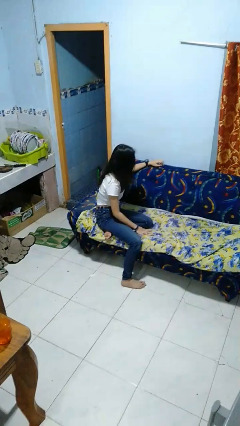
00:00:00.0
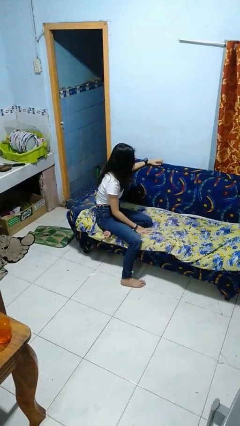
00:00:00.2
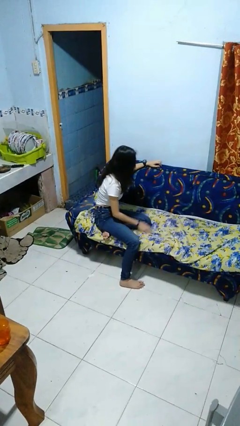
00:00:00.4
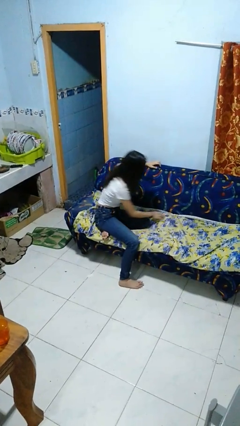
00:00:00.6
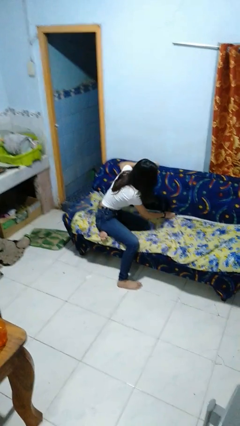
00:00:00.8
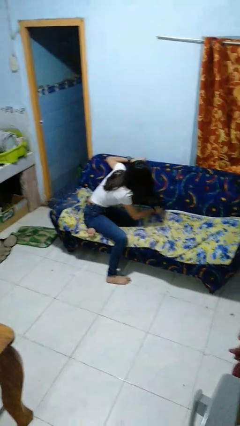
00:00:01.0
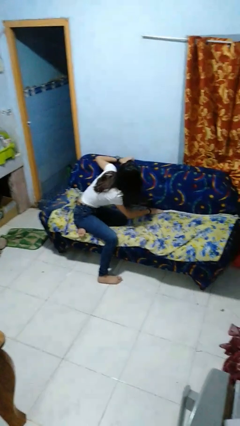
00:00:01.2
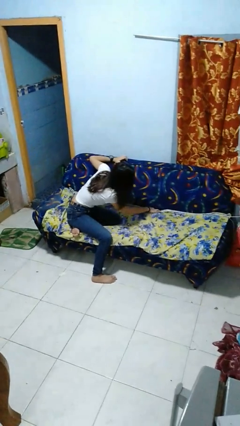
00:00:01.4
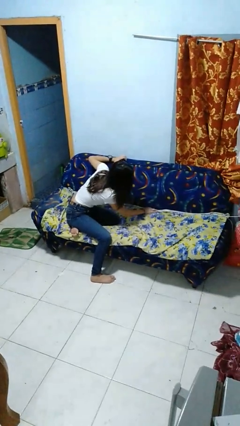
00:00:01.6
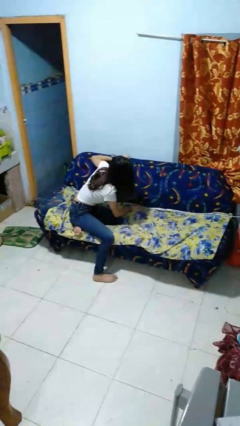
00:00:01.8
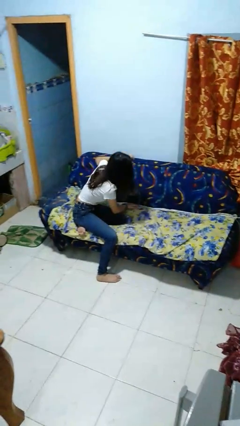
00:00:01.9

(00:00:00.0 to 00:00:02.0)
person searches in couch

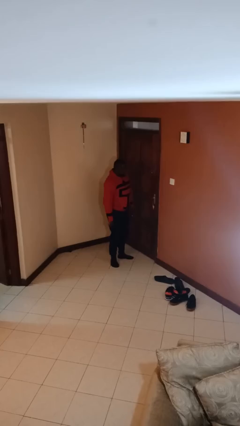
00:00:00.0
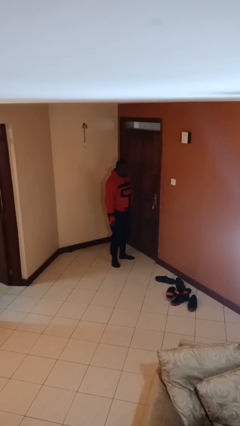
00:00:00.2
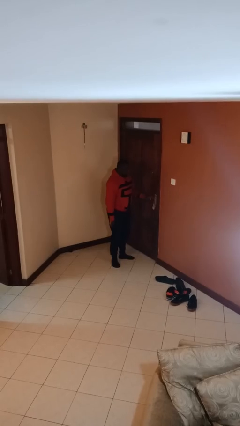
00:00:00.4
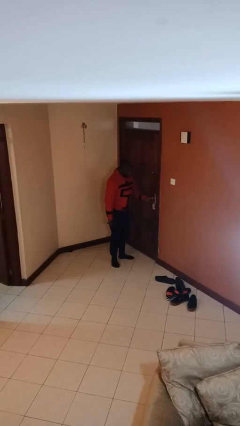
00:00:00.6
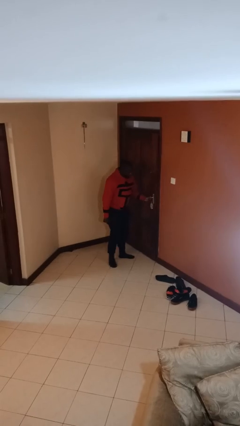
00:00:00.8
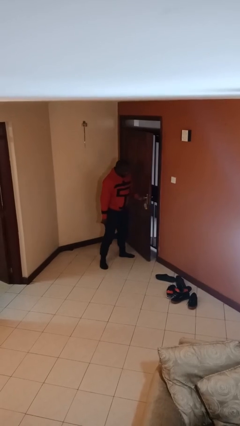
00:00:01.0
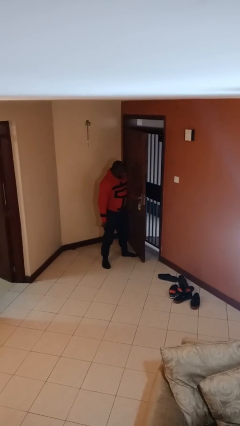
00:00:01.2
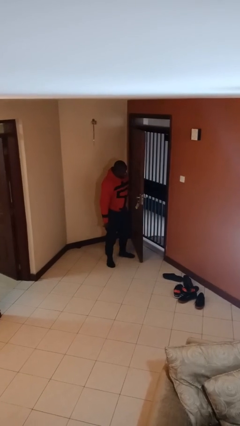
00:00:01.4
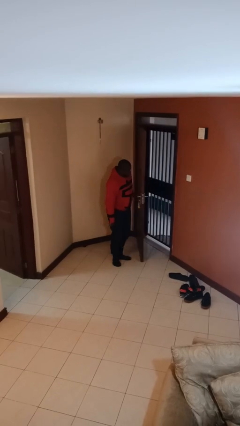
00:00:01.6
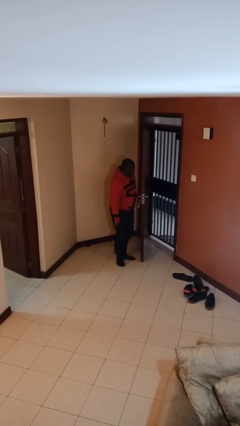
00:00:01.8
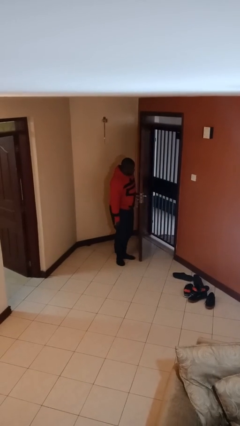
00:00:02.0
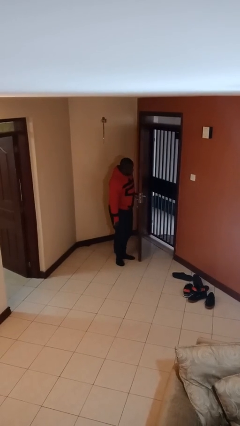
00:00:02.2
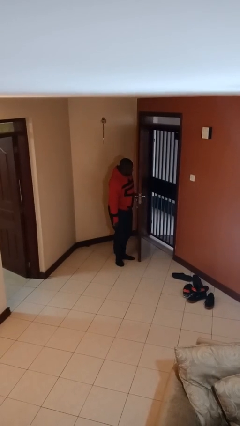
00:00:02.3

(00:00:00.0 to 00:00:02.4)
person opens facility door

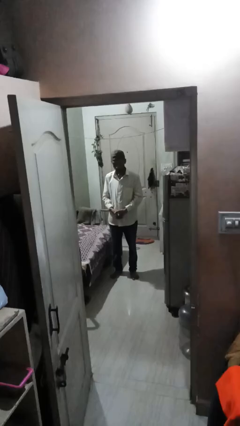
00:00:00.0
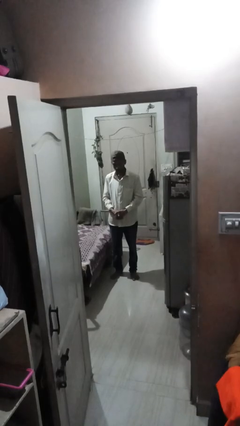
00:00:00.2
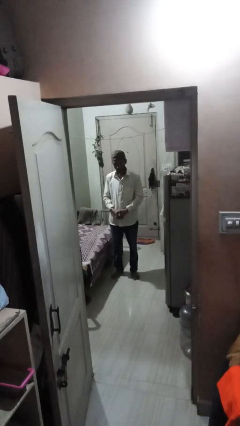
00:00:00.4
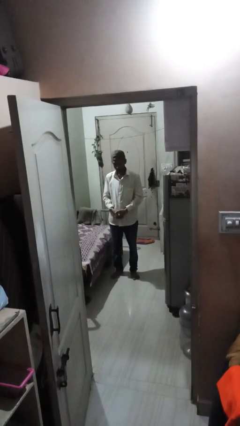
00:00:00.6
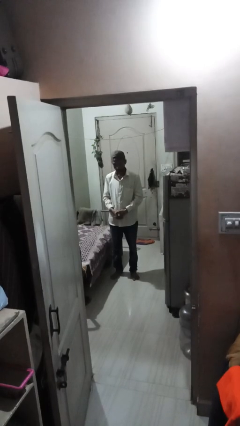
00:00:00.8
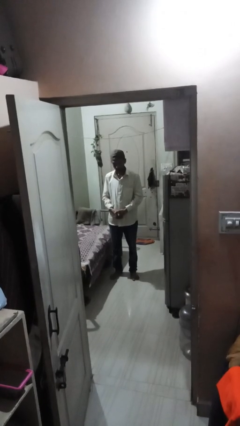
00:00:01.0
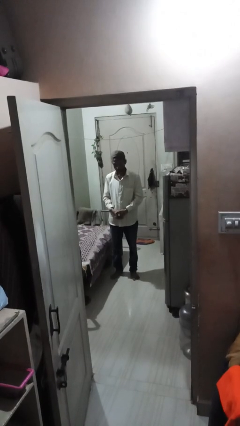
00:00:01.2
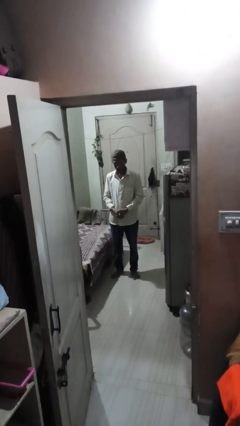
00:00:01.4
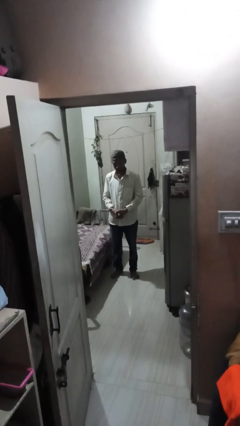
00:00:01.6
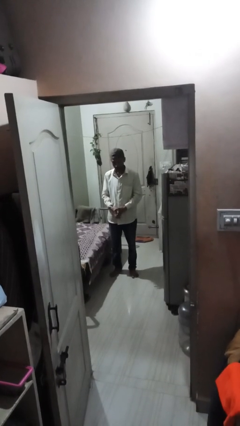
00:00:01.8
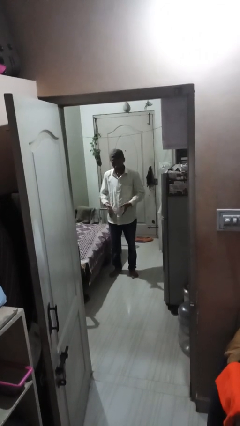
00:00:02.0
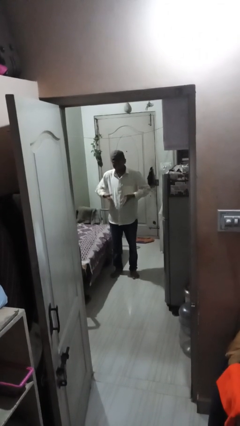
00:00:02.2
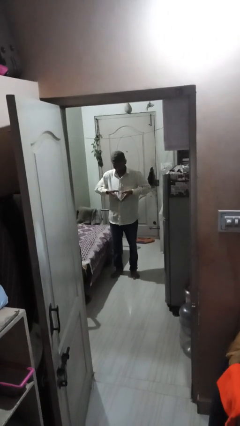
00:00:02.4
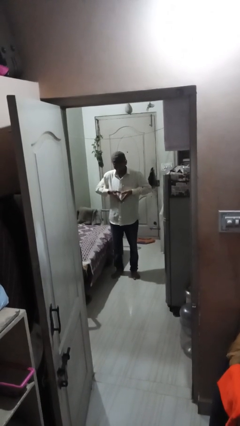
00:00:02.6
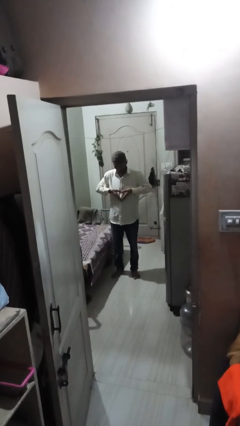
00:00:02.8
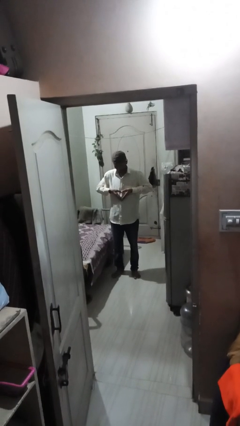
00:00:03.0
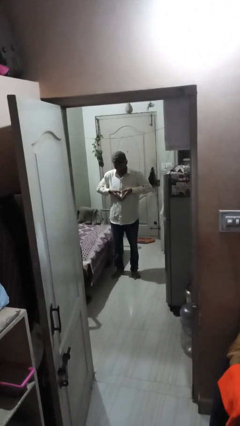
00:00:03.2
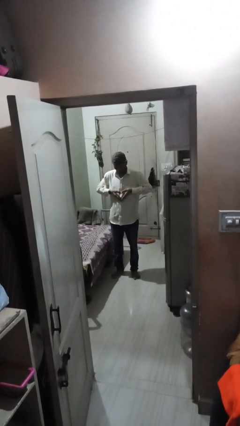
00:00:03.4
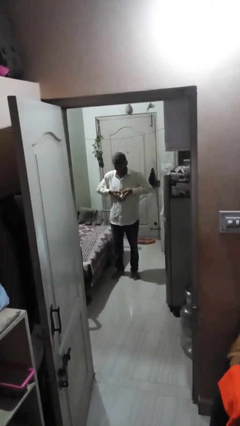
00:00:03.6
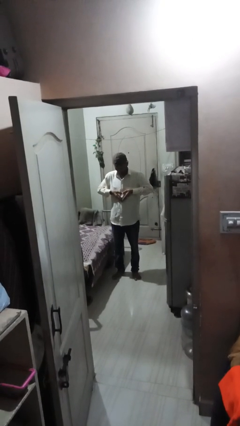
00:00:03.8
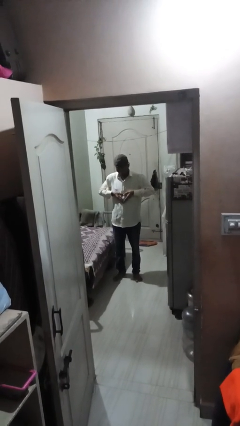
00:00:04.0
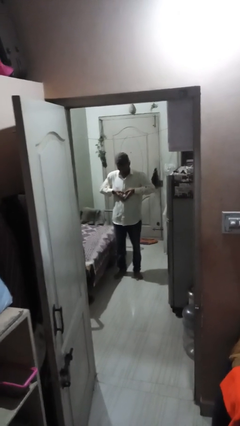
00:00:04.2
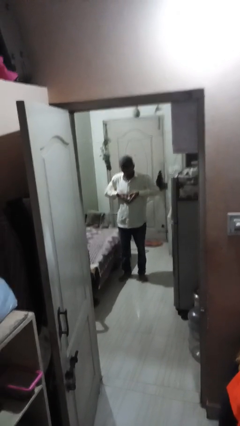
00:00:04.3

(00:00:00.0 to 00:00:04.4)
person gestures heart

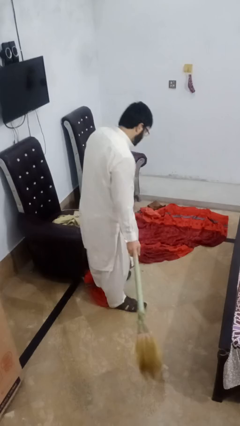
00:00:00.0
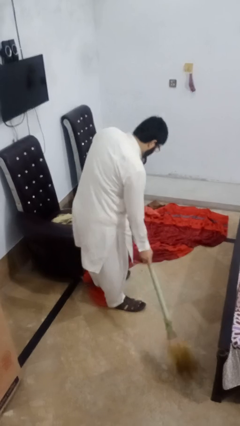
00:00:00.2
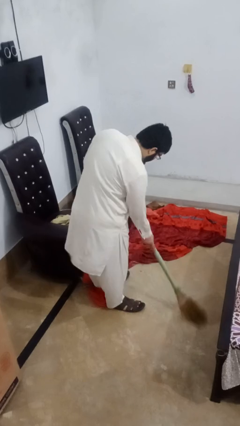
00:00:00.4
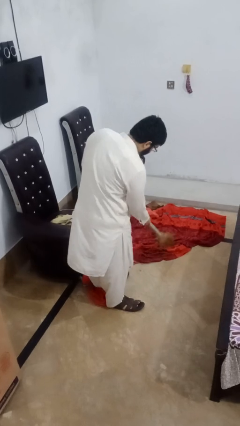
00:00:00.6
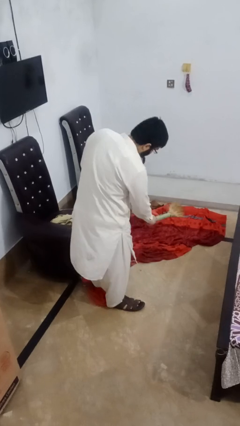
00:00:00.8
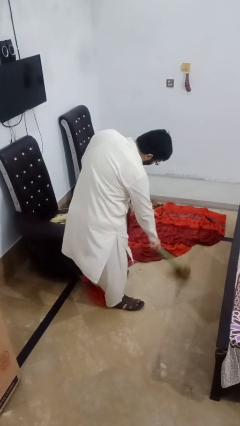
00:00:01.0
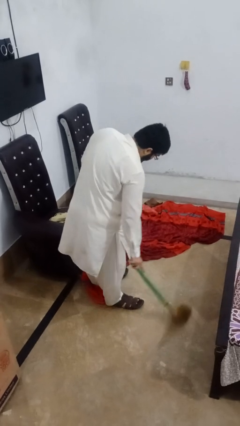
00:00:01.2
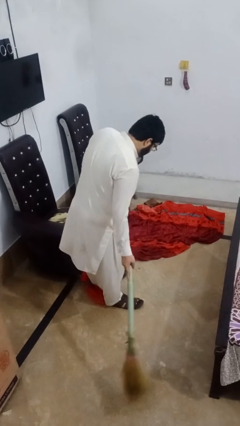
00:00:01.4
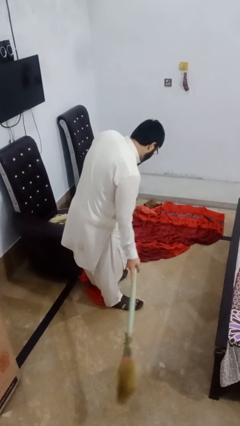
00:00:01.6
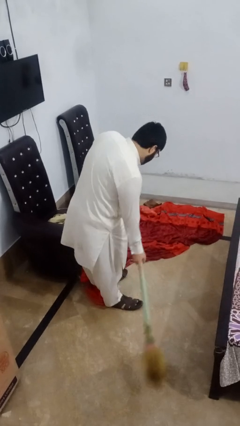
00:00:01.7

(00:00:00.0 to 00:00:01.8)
person sweeps floor

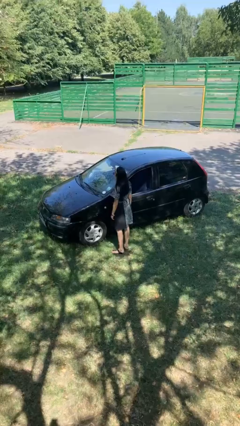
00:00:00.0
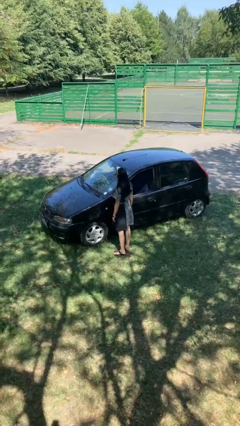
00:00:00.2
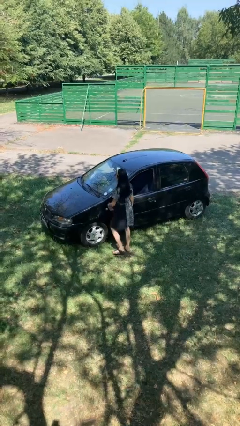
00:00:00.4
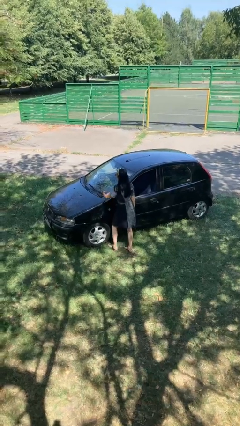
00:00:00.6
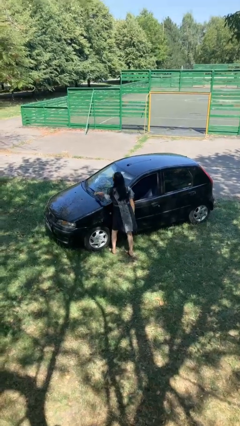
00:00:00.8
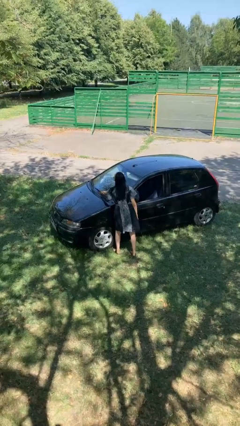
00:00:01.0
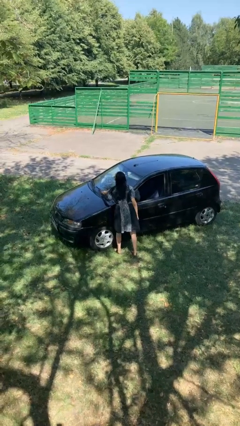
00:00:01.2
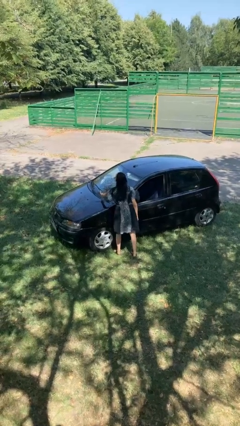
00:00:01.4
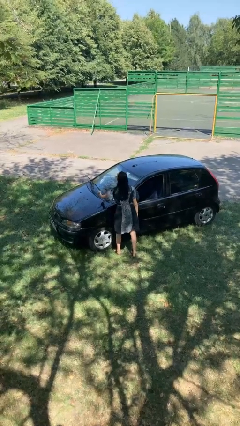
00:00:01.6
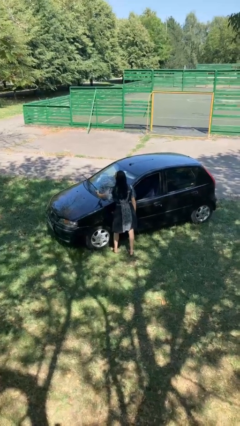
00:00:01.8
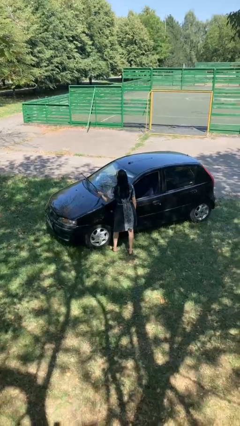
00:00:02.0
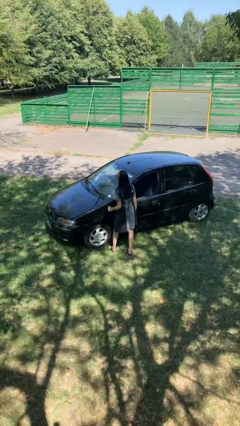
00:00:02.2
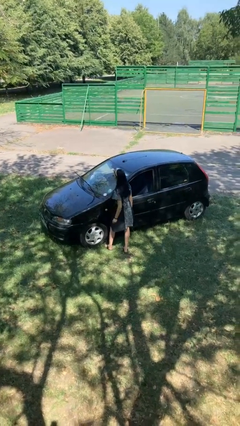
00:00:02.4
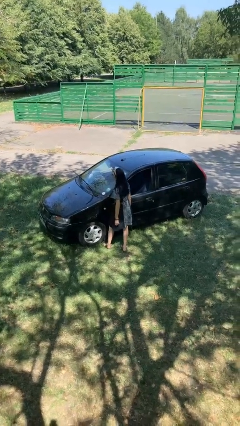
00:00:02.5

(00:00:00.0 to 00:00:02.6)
person flips up car wipers

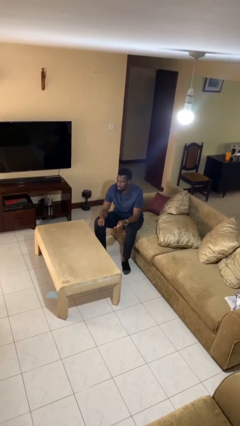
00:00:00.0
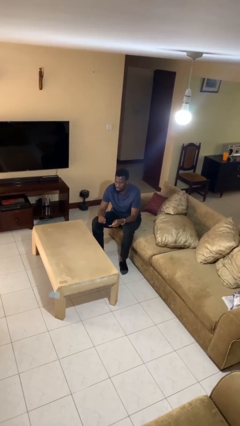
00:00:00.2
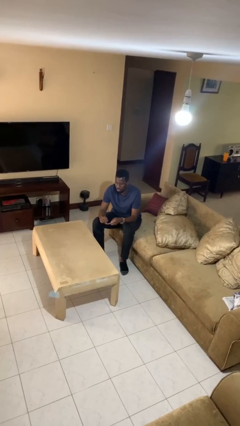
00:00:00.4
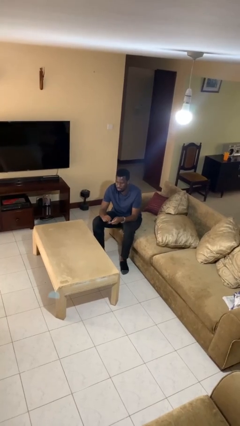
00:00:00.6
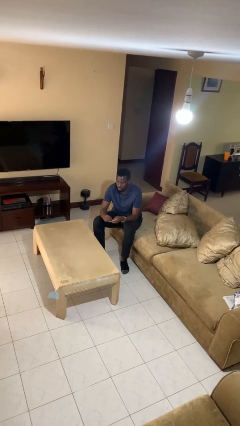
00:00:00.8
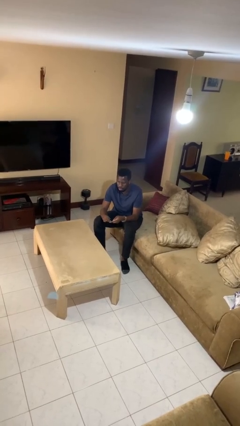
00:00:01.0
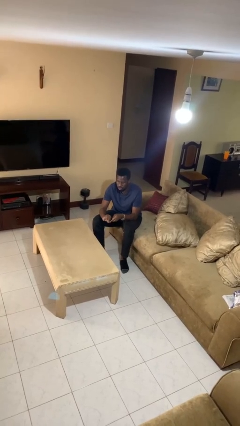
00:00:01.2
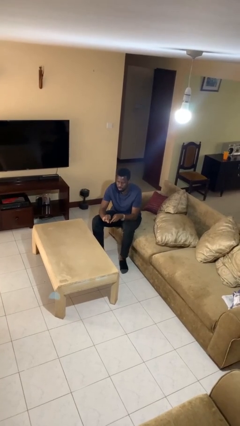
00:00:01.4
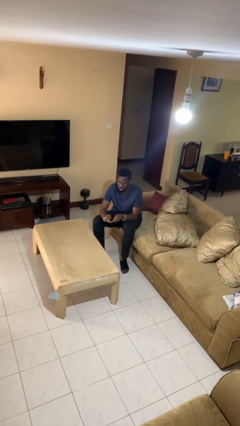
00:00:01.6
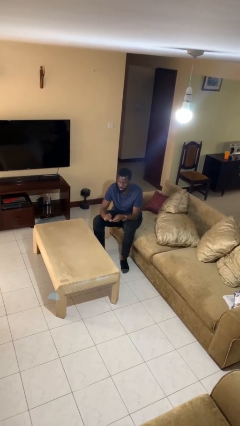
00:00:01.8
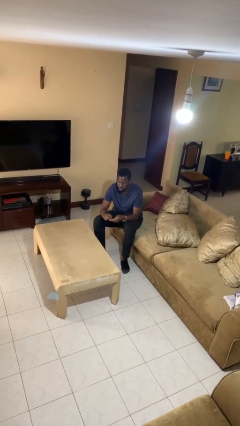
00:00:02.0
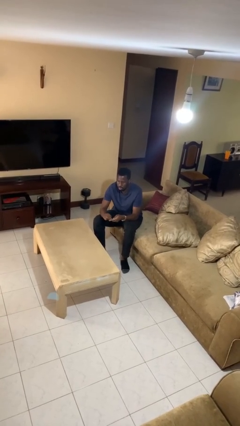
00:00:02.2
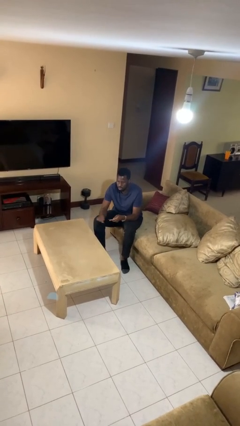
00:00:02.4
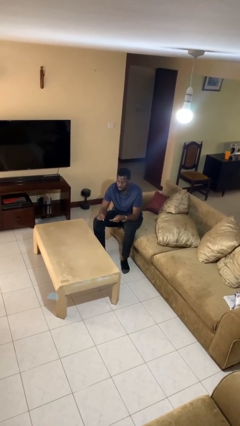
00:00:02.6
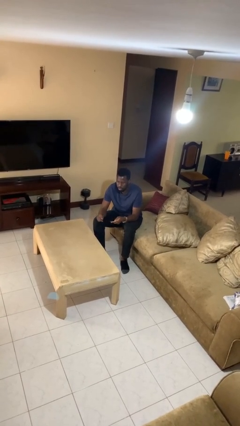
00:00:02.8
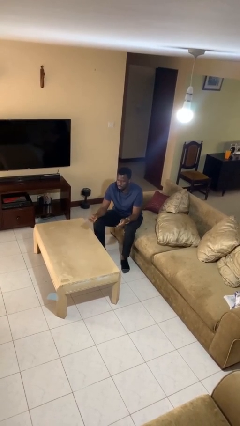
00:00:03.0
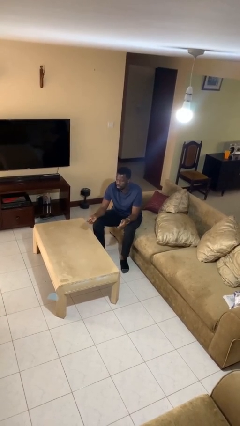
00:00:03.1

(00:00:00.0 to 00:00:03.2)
person files fingernails

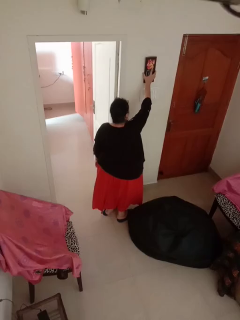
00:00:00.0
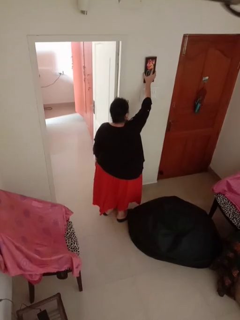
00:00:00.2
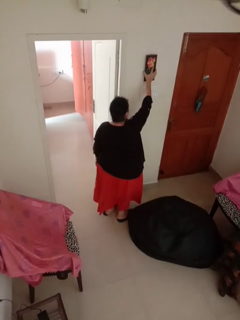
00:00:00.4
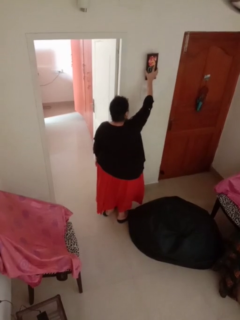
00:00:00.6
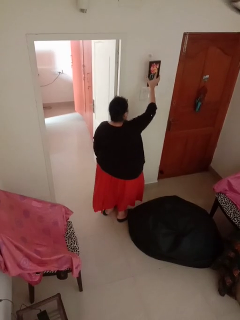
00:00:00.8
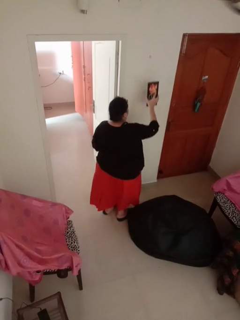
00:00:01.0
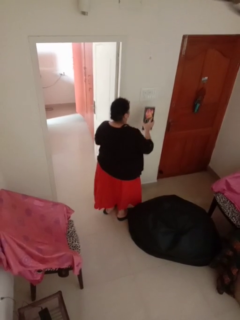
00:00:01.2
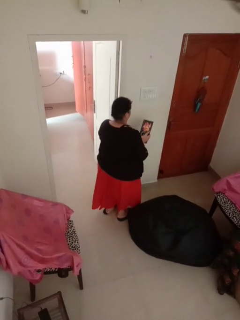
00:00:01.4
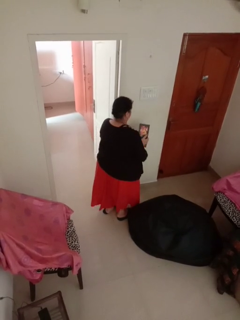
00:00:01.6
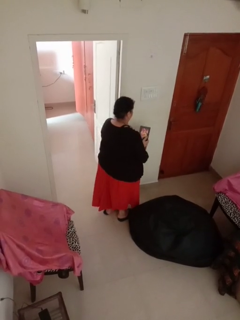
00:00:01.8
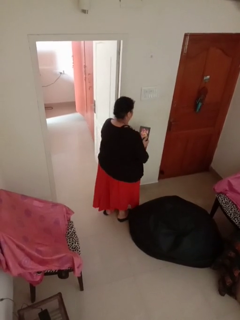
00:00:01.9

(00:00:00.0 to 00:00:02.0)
person takes down picture frame
